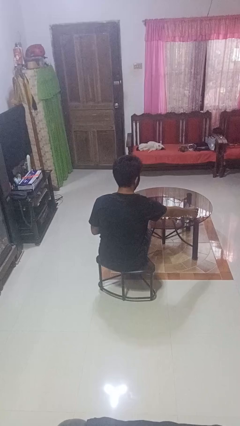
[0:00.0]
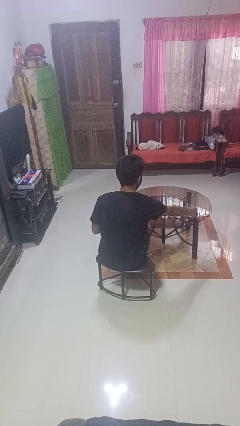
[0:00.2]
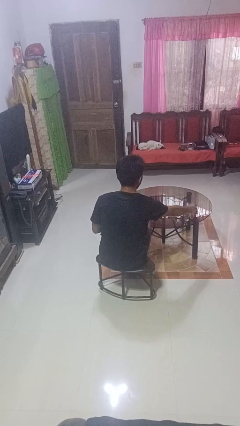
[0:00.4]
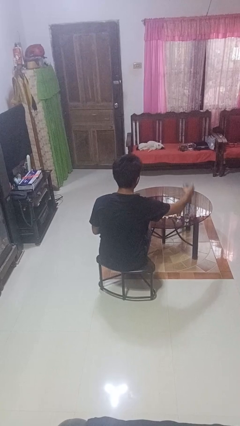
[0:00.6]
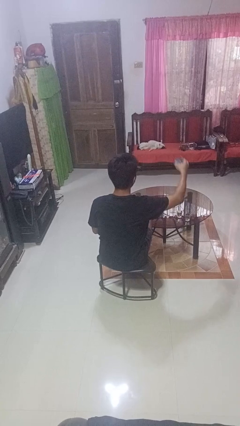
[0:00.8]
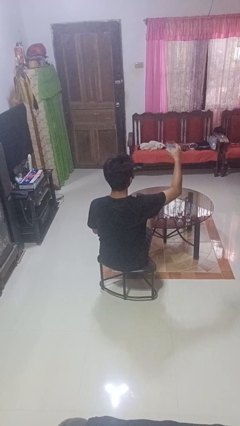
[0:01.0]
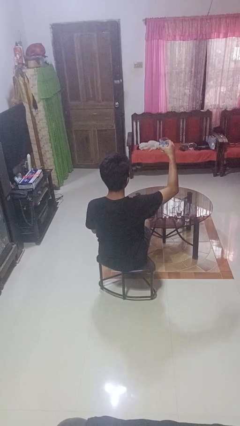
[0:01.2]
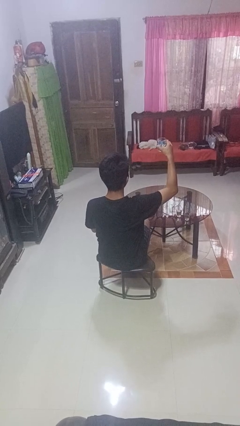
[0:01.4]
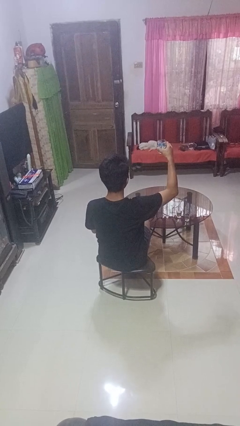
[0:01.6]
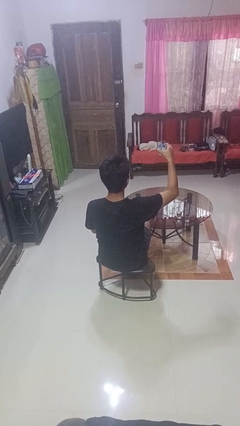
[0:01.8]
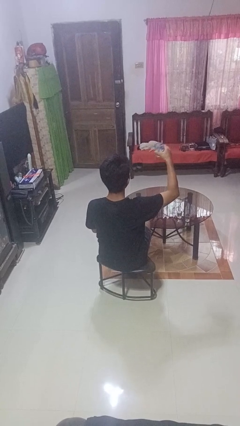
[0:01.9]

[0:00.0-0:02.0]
person picks up object from table

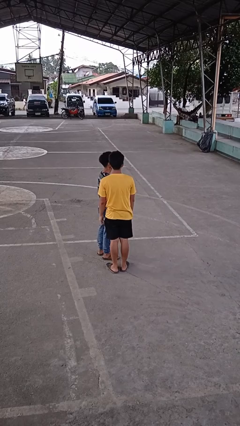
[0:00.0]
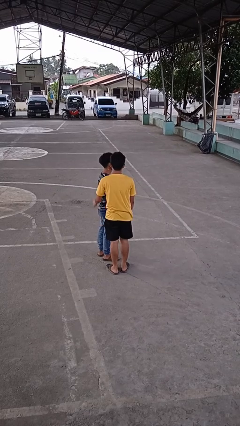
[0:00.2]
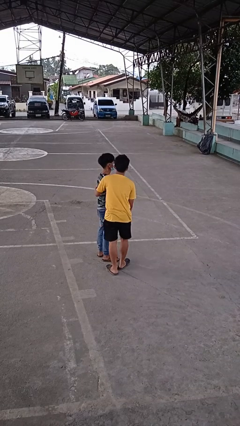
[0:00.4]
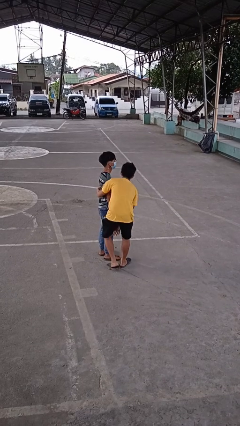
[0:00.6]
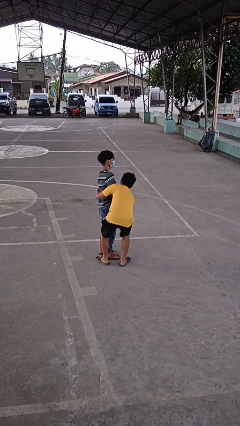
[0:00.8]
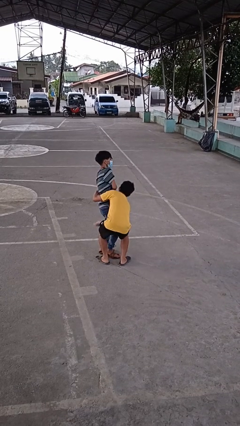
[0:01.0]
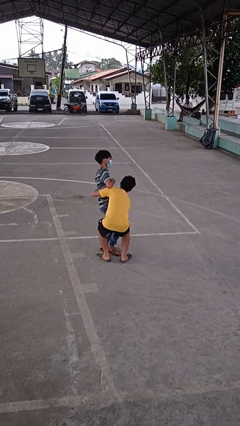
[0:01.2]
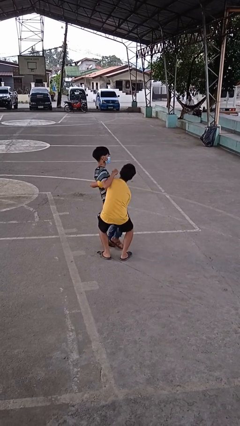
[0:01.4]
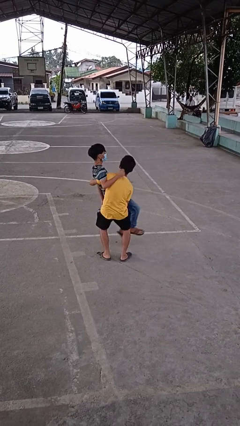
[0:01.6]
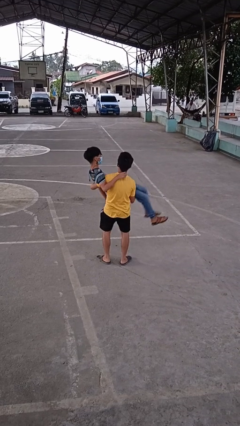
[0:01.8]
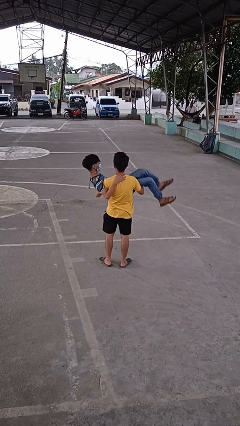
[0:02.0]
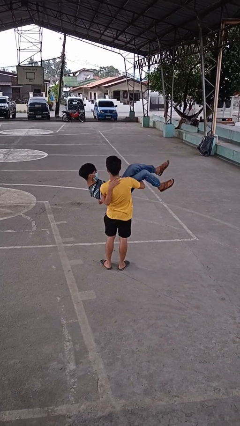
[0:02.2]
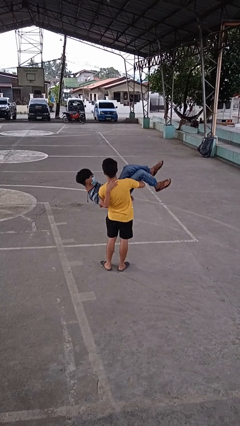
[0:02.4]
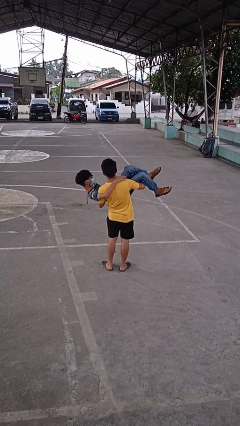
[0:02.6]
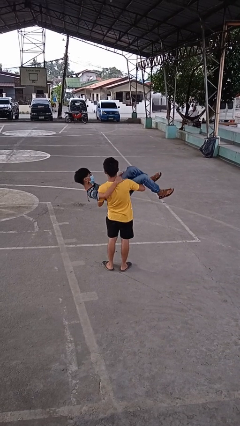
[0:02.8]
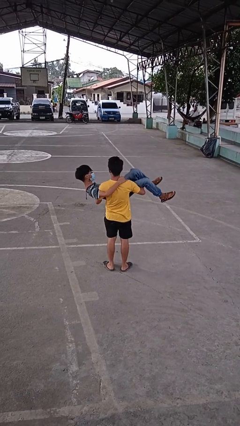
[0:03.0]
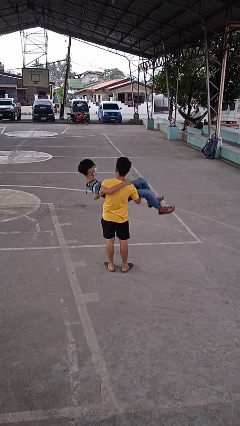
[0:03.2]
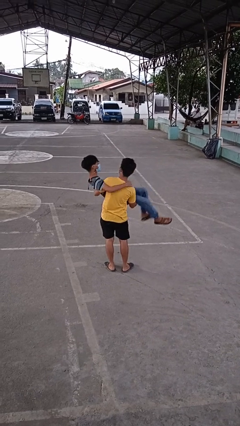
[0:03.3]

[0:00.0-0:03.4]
person picks up person

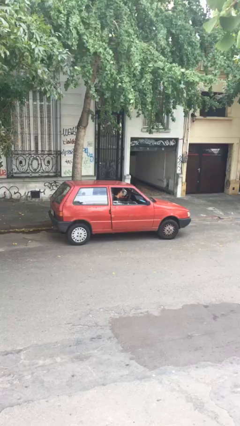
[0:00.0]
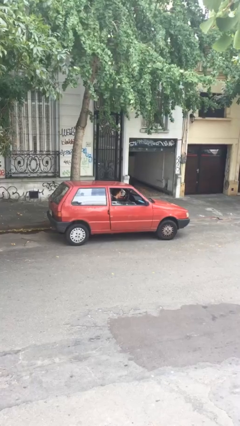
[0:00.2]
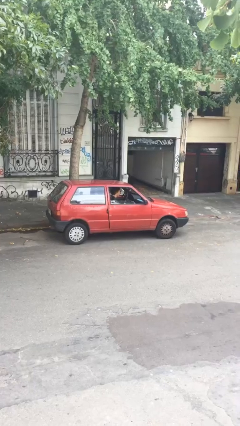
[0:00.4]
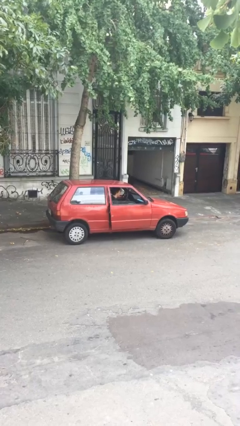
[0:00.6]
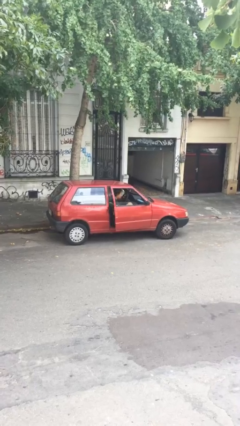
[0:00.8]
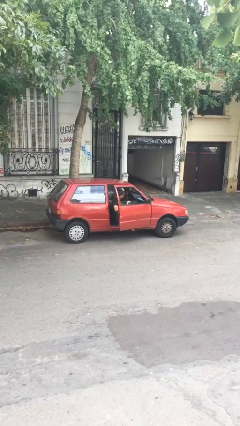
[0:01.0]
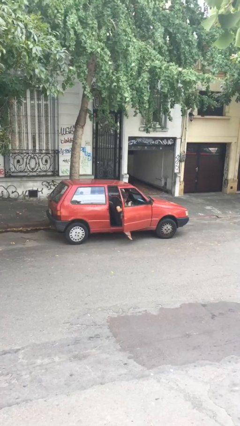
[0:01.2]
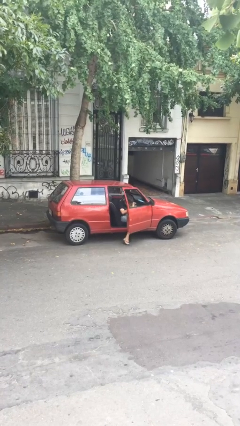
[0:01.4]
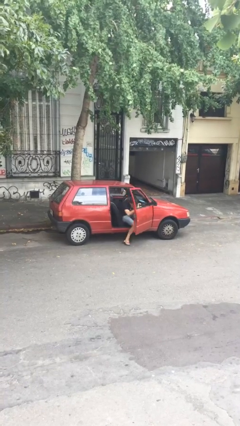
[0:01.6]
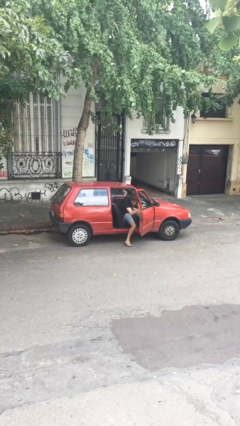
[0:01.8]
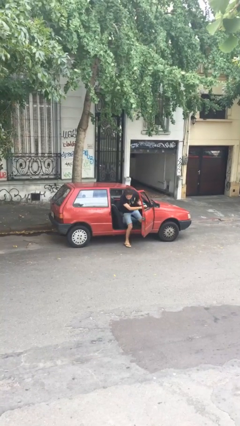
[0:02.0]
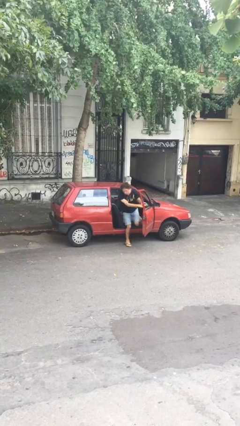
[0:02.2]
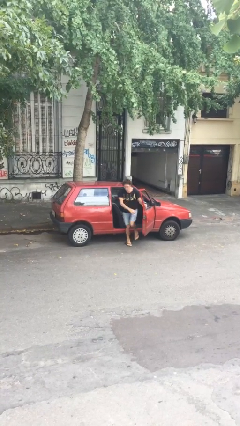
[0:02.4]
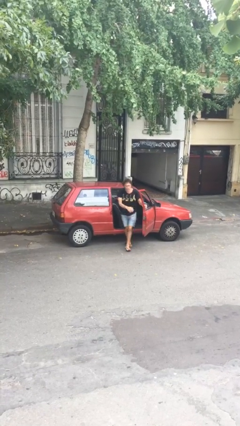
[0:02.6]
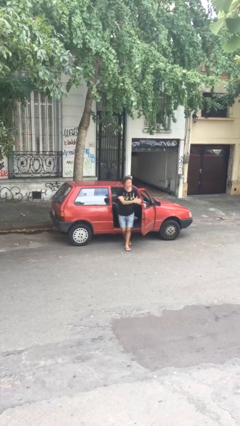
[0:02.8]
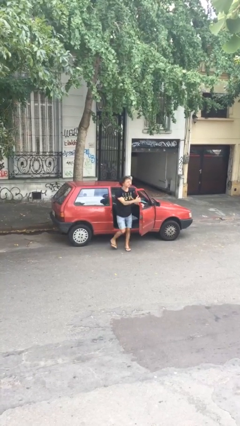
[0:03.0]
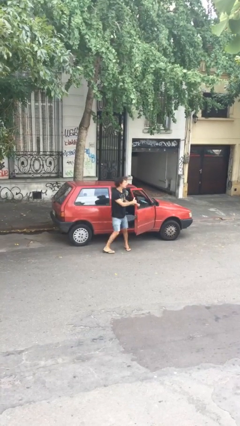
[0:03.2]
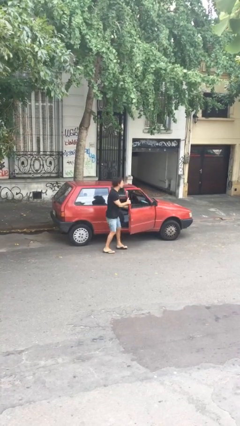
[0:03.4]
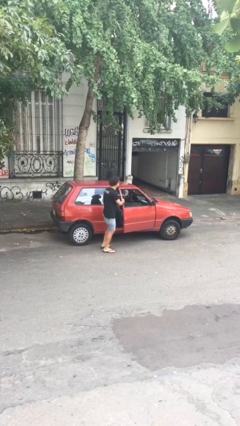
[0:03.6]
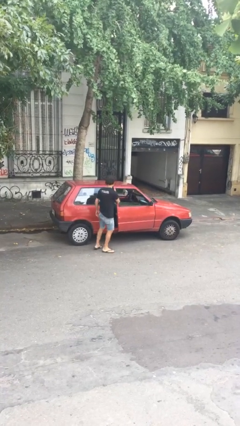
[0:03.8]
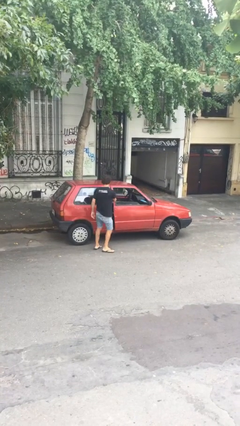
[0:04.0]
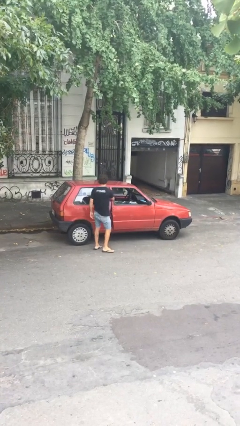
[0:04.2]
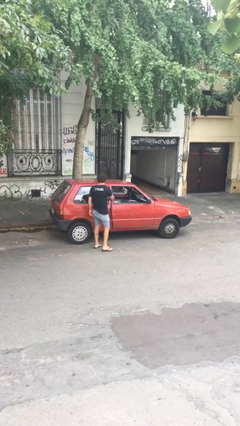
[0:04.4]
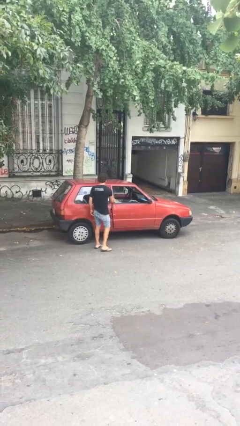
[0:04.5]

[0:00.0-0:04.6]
car drops off person

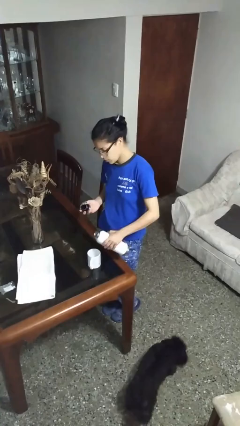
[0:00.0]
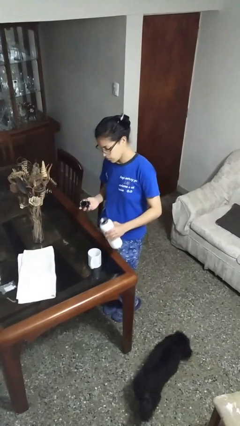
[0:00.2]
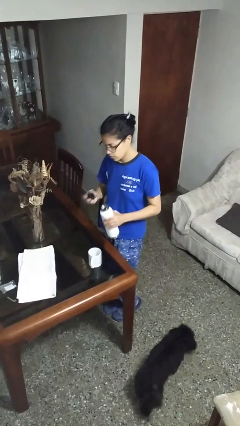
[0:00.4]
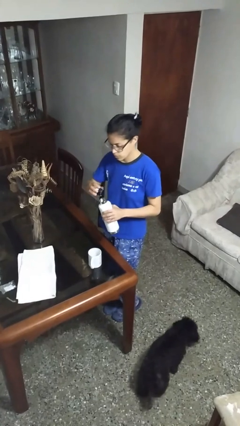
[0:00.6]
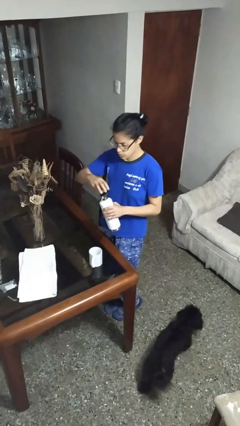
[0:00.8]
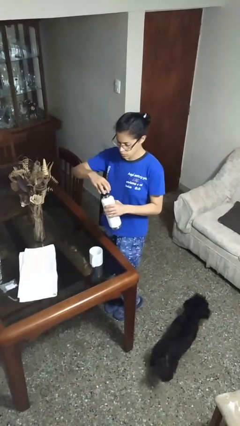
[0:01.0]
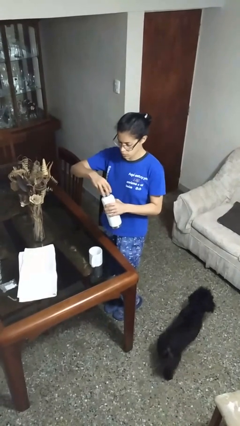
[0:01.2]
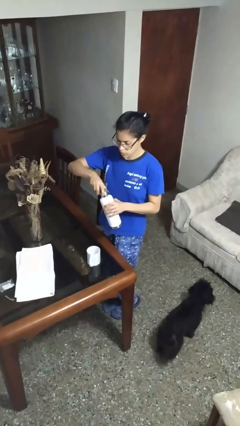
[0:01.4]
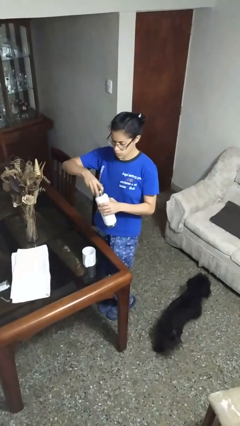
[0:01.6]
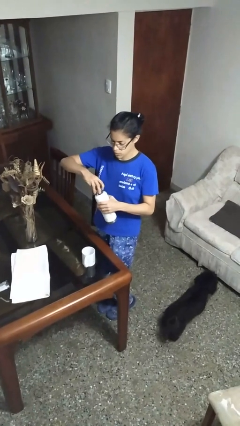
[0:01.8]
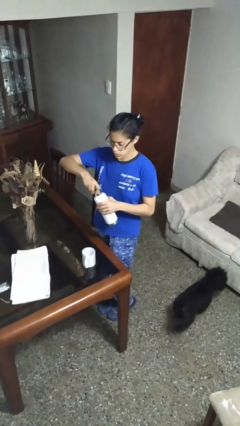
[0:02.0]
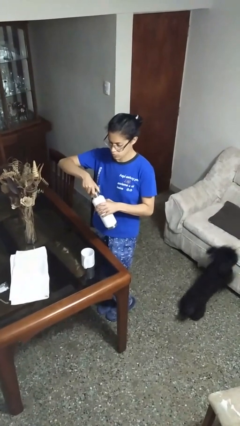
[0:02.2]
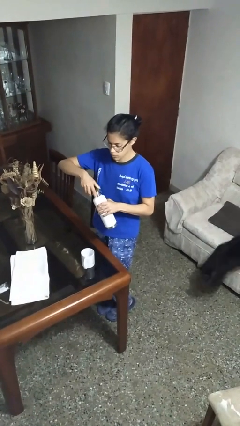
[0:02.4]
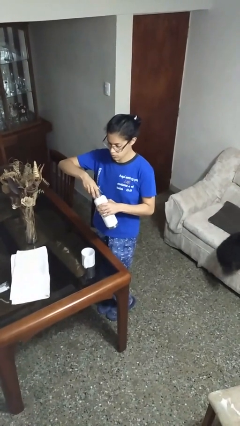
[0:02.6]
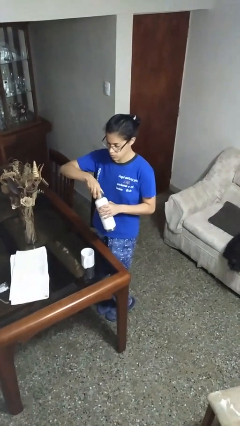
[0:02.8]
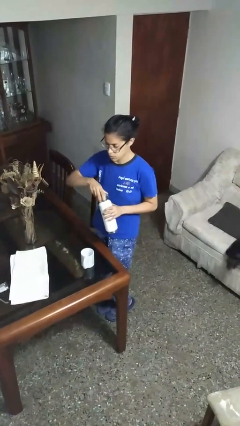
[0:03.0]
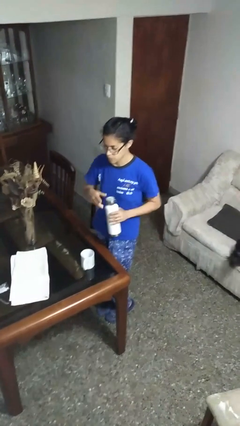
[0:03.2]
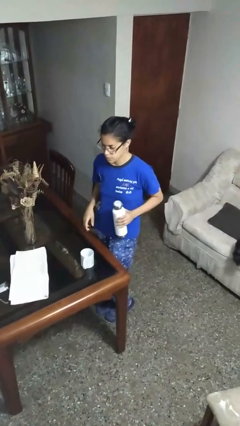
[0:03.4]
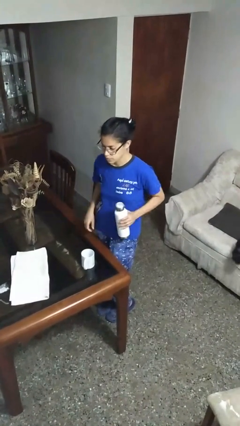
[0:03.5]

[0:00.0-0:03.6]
person screws lid to bottle

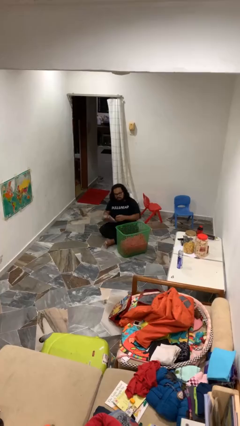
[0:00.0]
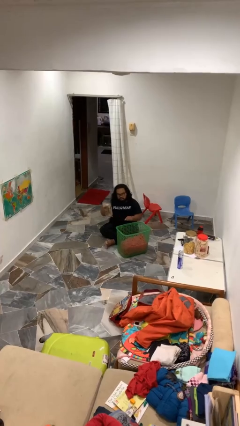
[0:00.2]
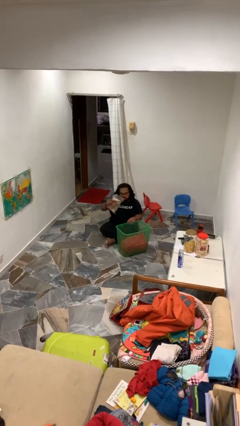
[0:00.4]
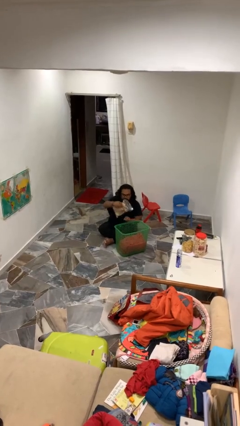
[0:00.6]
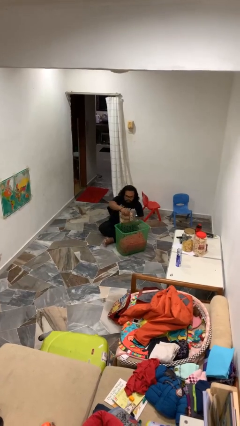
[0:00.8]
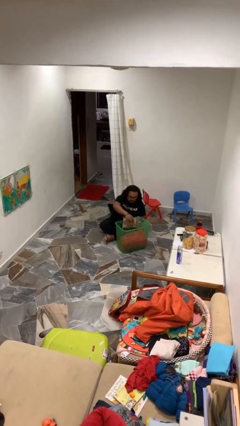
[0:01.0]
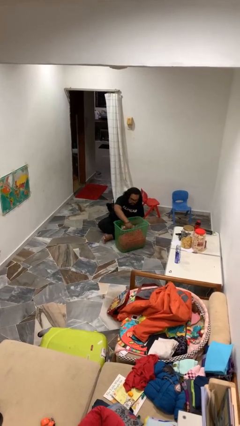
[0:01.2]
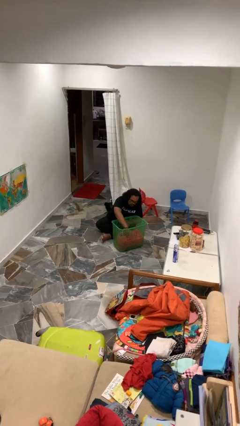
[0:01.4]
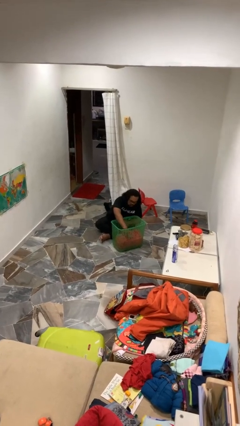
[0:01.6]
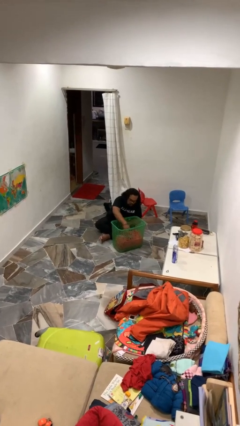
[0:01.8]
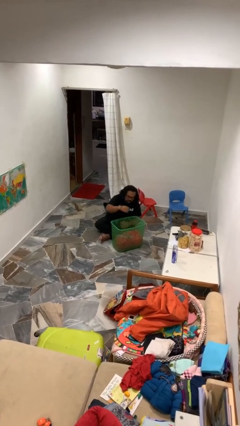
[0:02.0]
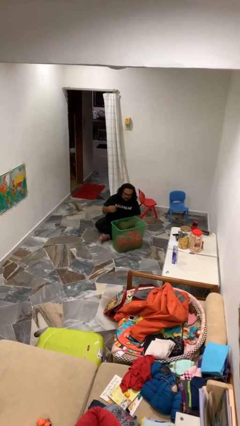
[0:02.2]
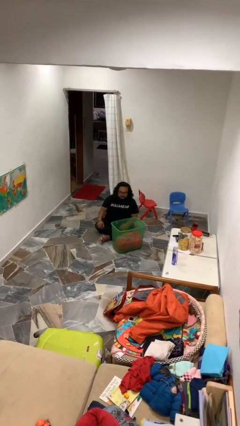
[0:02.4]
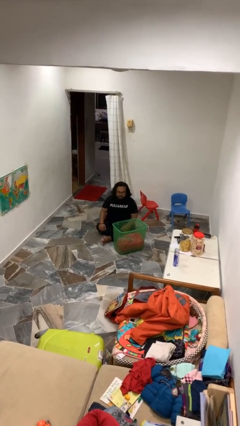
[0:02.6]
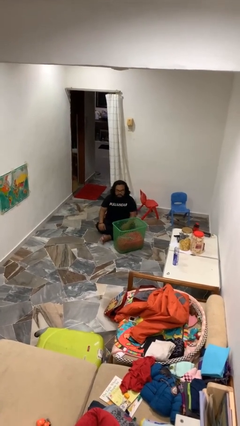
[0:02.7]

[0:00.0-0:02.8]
person puts object into basket

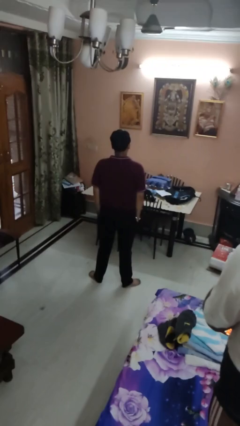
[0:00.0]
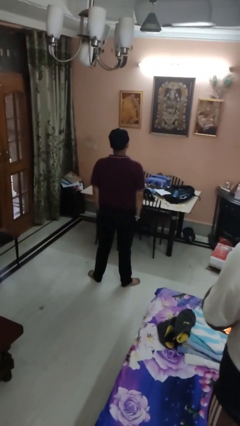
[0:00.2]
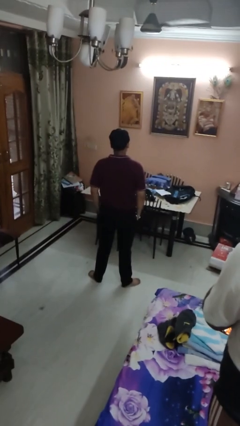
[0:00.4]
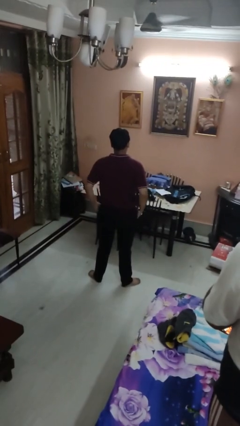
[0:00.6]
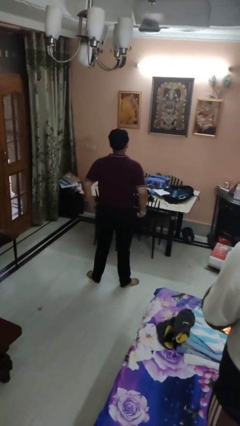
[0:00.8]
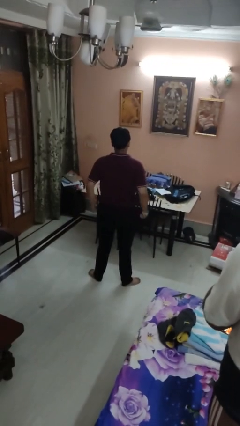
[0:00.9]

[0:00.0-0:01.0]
person puts hands in back pockets
